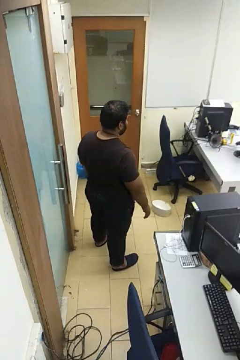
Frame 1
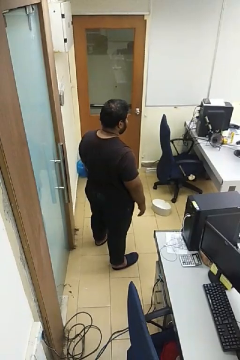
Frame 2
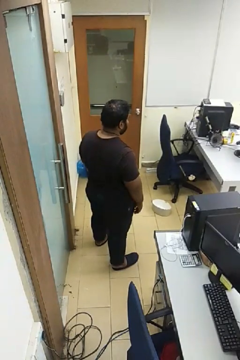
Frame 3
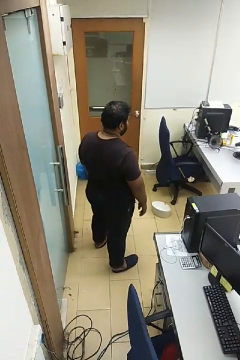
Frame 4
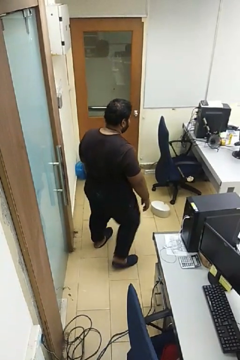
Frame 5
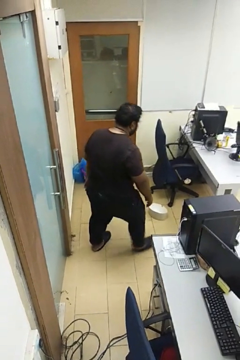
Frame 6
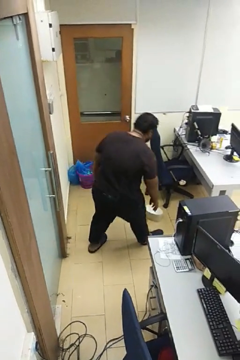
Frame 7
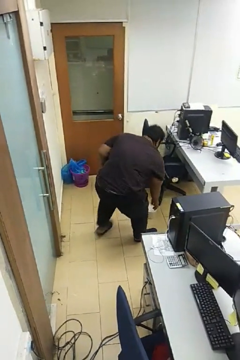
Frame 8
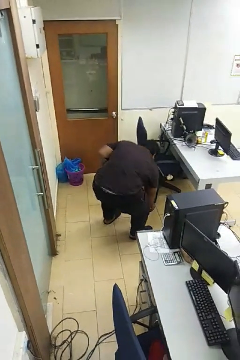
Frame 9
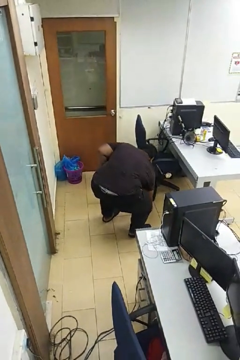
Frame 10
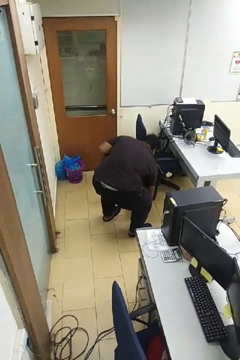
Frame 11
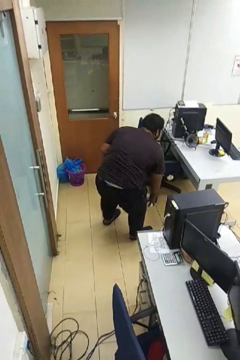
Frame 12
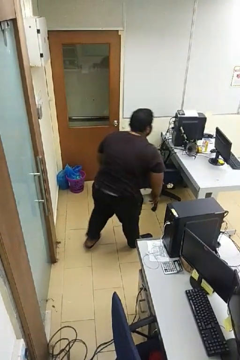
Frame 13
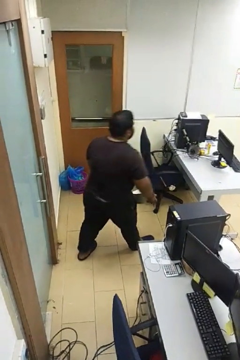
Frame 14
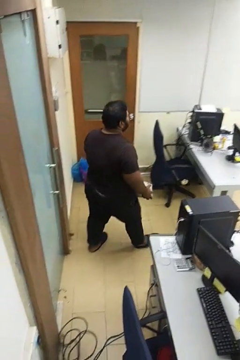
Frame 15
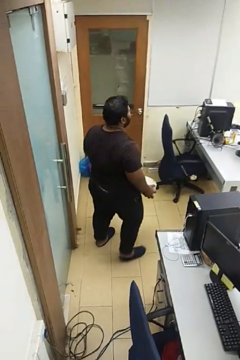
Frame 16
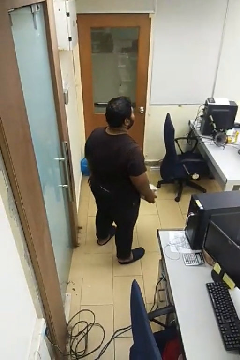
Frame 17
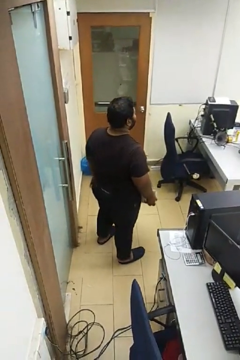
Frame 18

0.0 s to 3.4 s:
person picks up object from floor

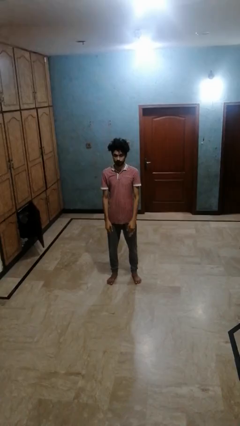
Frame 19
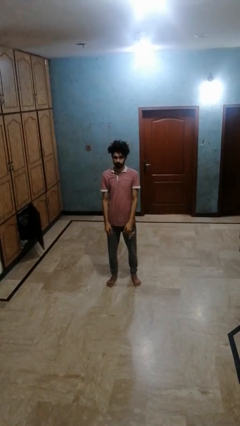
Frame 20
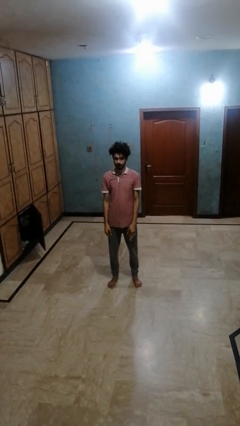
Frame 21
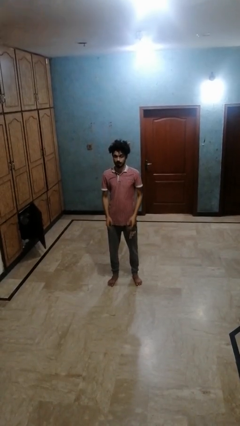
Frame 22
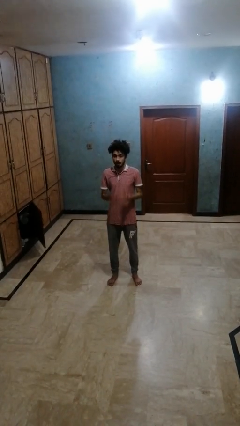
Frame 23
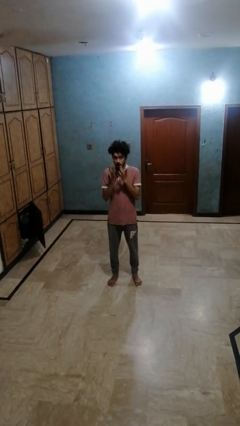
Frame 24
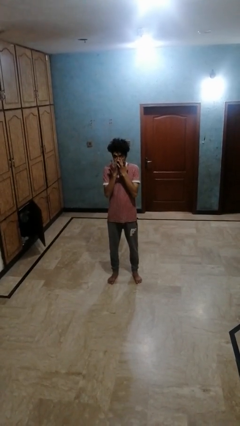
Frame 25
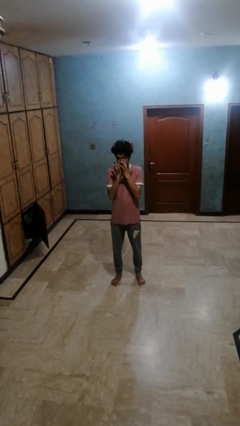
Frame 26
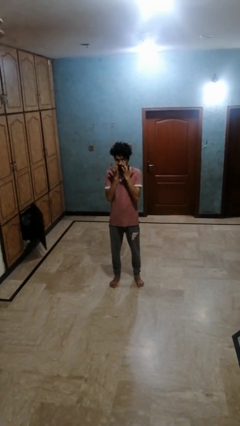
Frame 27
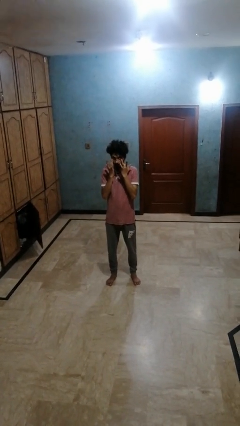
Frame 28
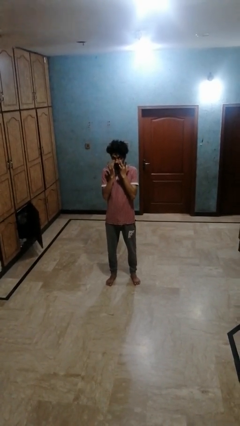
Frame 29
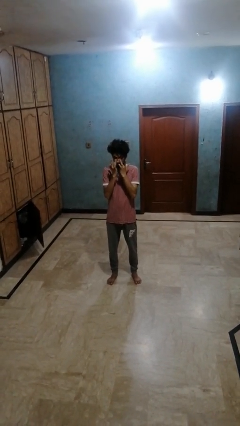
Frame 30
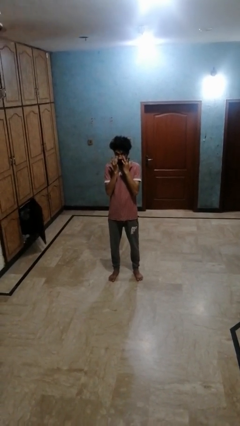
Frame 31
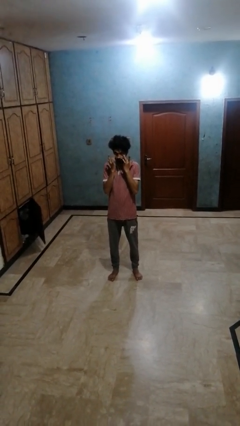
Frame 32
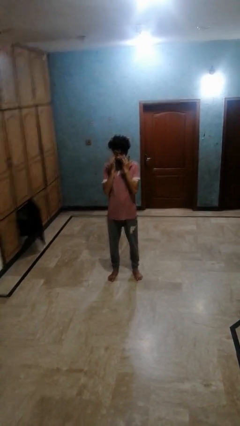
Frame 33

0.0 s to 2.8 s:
person rubs eyes

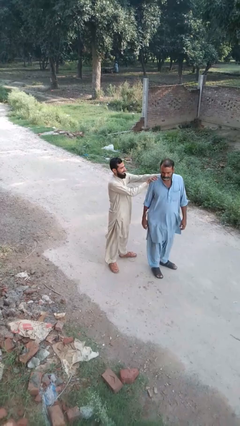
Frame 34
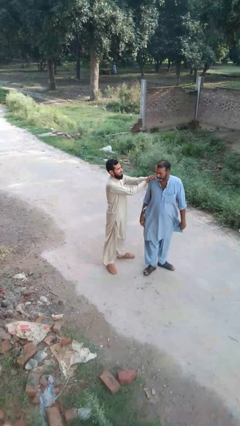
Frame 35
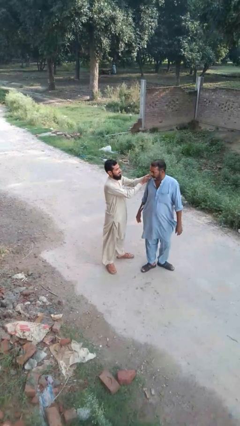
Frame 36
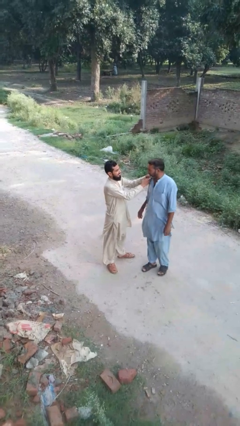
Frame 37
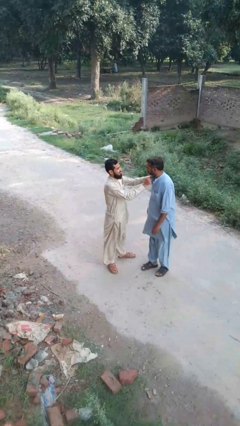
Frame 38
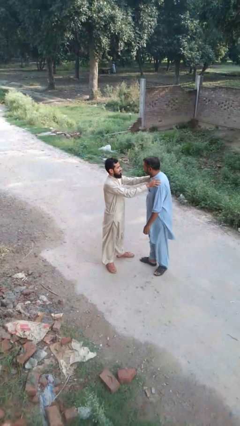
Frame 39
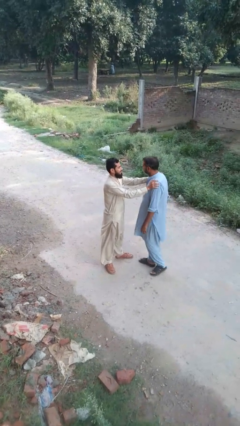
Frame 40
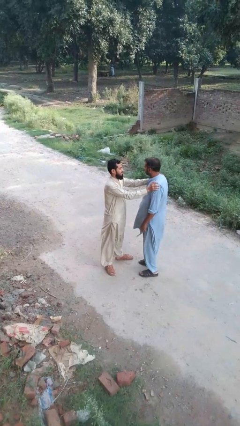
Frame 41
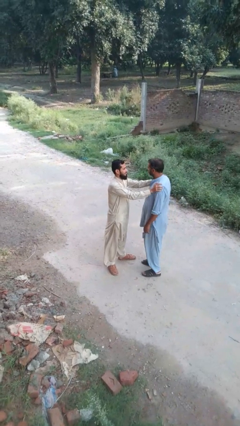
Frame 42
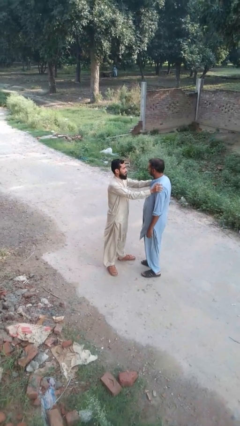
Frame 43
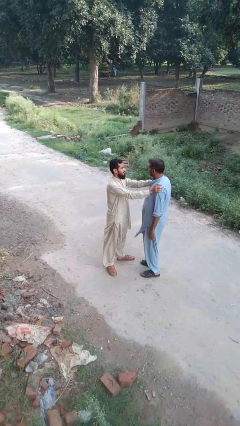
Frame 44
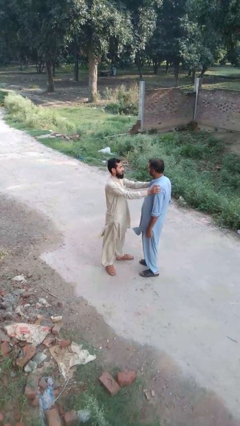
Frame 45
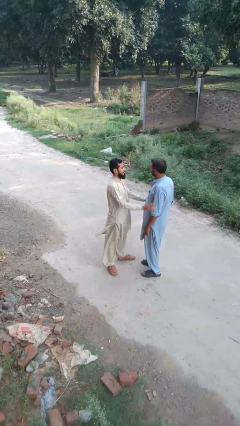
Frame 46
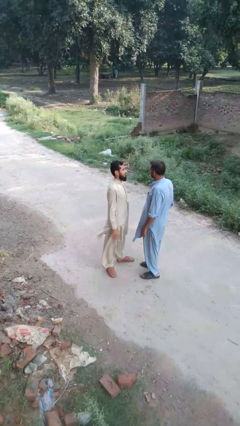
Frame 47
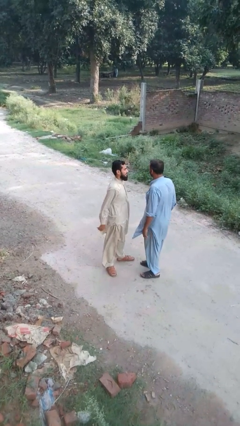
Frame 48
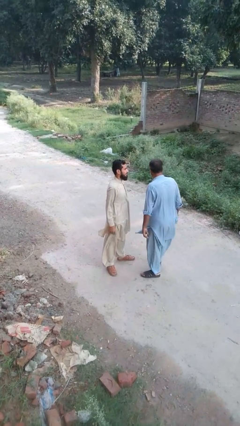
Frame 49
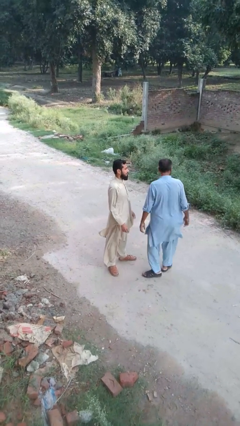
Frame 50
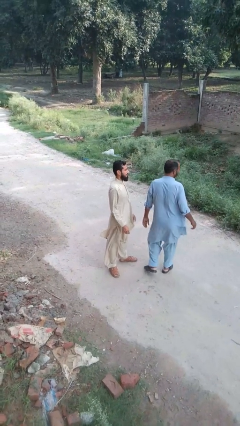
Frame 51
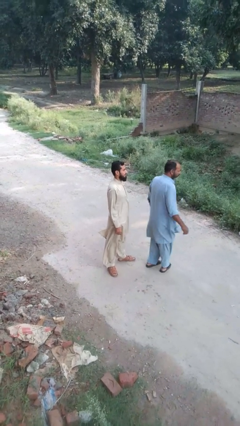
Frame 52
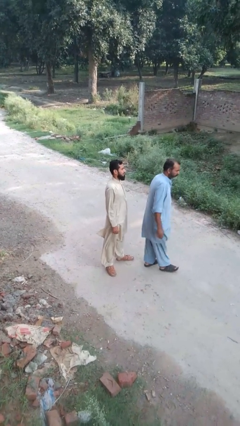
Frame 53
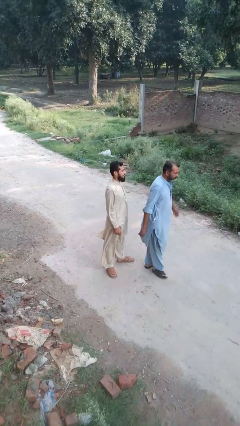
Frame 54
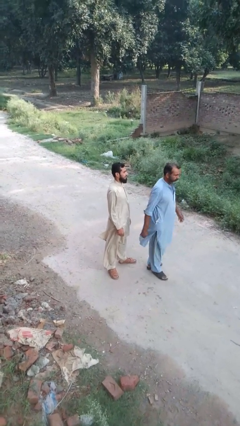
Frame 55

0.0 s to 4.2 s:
person spins person around

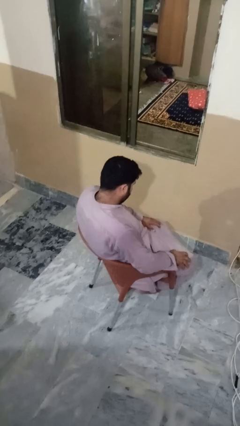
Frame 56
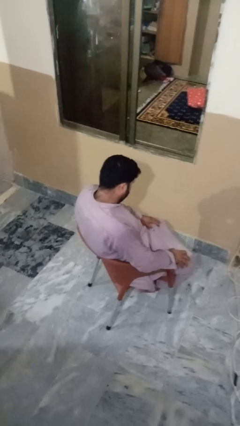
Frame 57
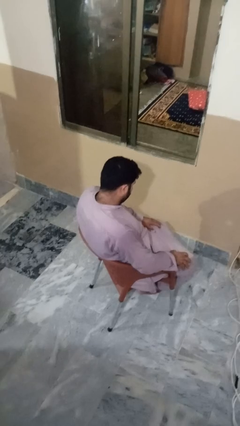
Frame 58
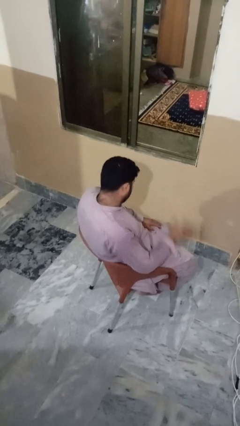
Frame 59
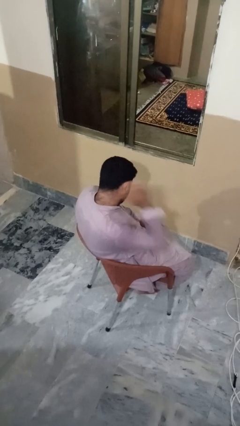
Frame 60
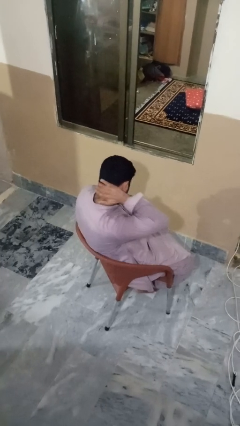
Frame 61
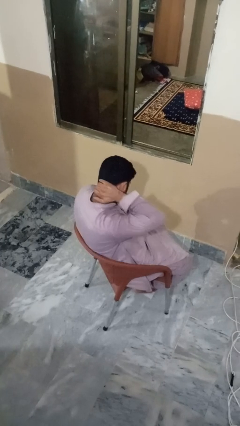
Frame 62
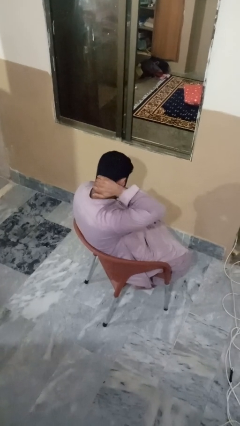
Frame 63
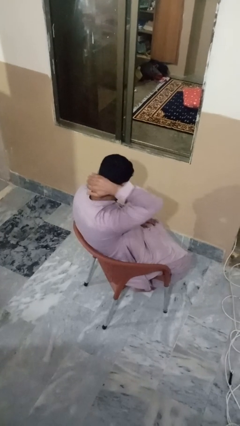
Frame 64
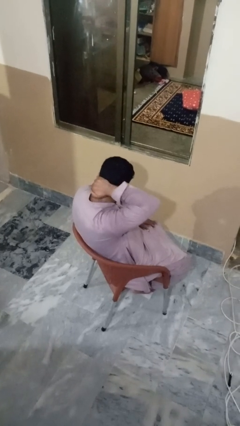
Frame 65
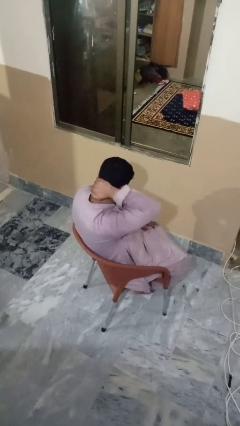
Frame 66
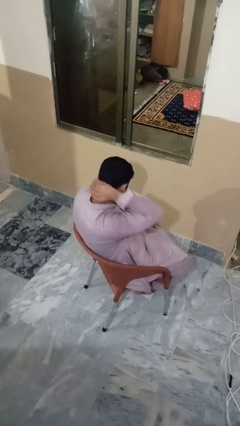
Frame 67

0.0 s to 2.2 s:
person rubs neck

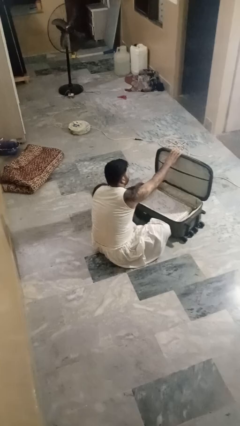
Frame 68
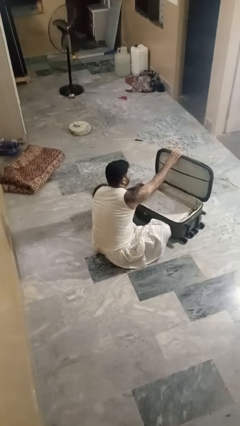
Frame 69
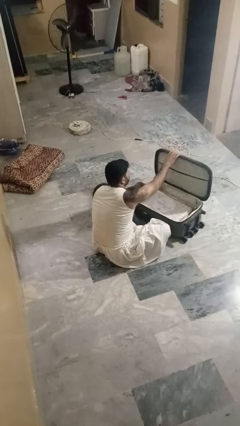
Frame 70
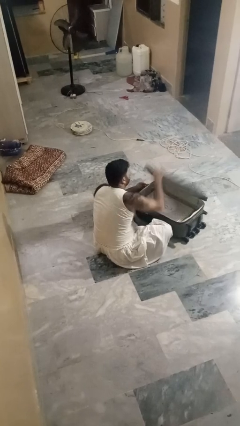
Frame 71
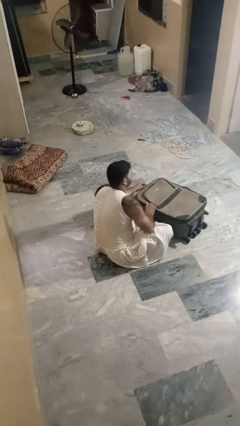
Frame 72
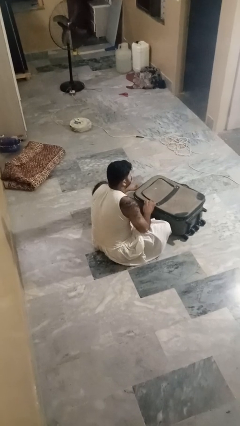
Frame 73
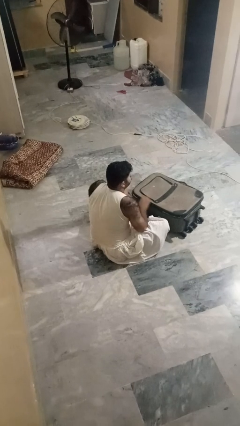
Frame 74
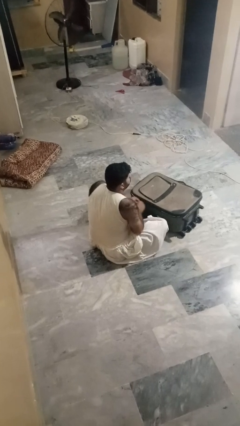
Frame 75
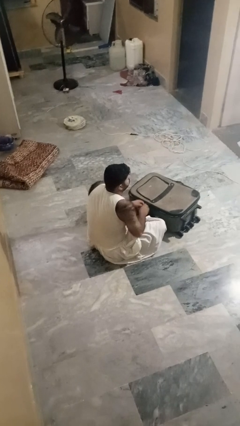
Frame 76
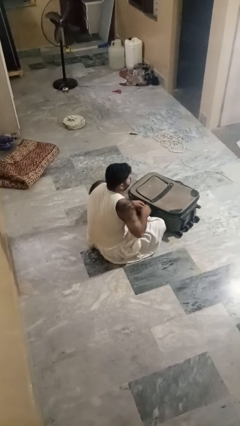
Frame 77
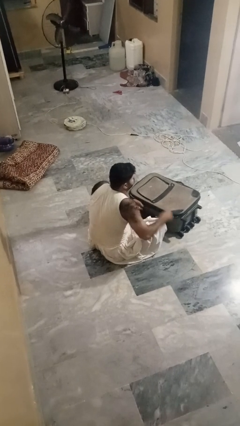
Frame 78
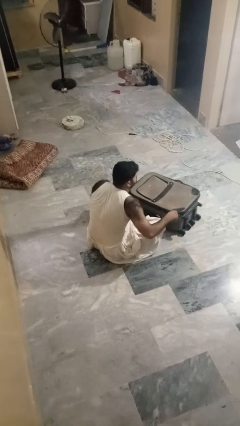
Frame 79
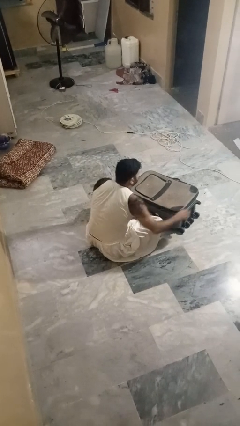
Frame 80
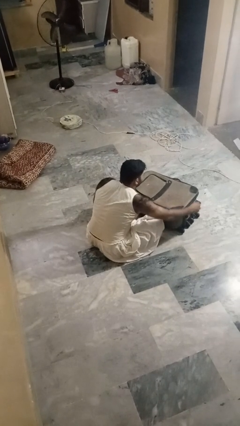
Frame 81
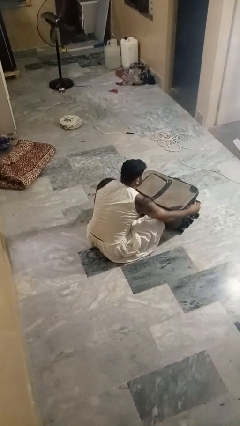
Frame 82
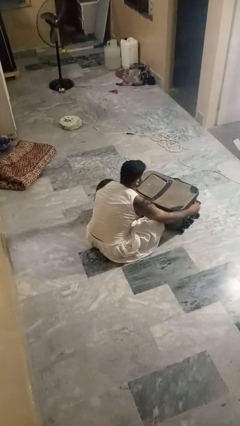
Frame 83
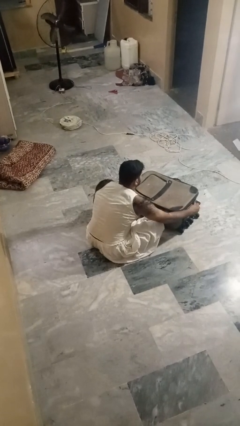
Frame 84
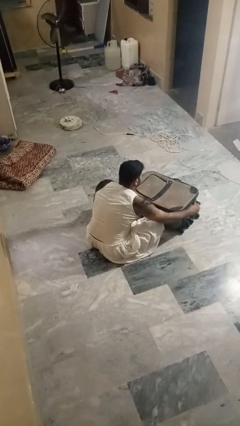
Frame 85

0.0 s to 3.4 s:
person closes suitcase

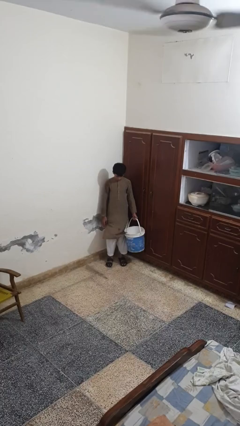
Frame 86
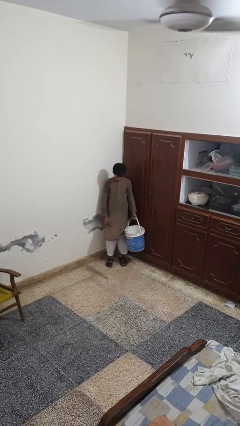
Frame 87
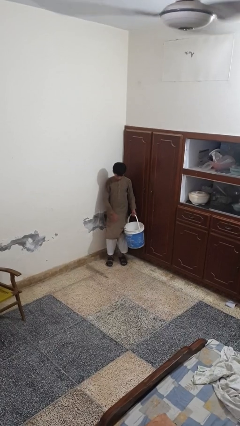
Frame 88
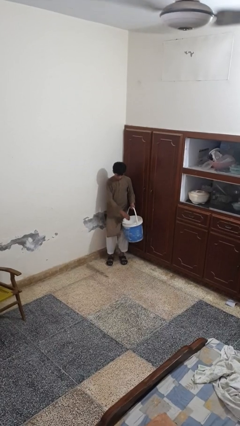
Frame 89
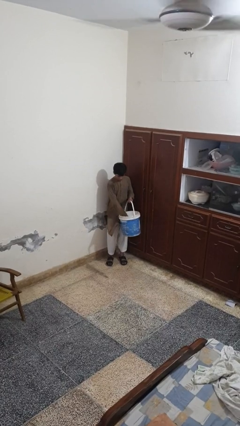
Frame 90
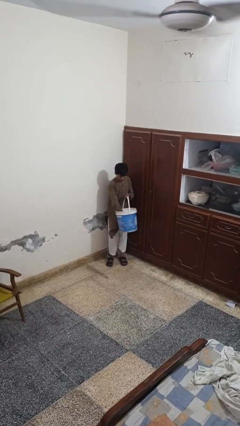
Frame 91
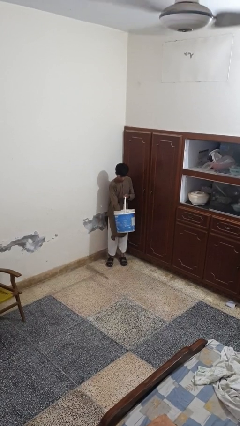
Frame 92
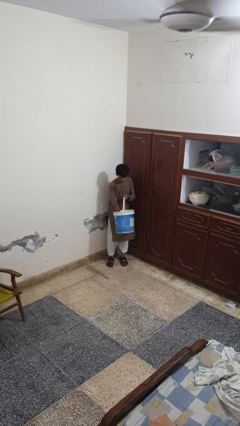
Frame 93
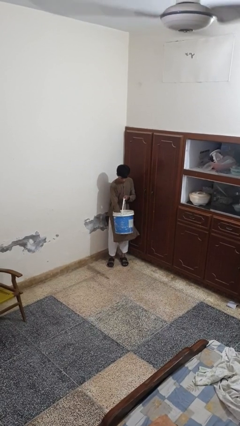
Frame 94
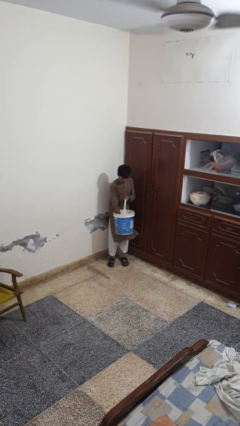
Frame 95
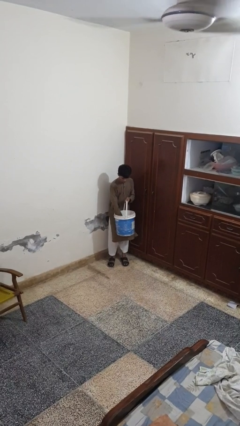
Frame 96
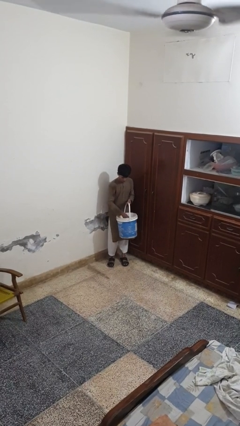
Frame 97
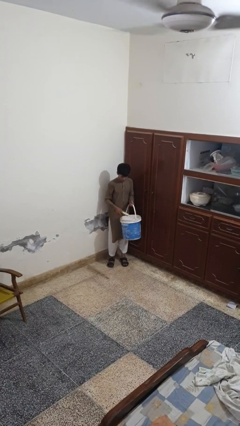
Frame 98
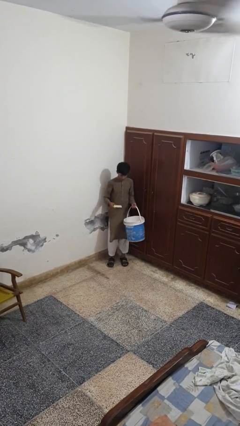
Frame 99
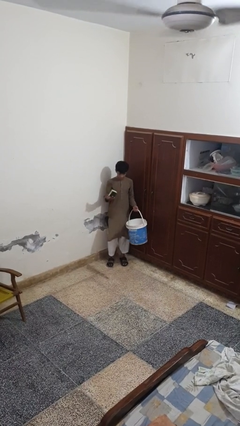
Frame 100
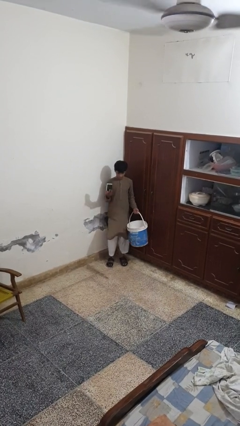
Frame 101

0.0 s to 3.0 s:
person takes object from basket
